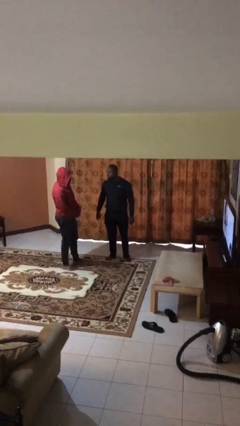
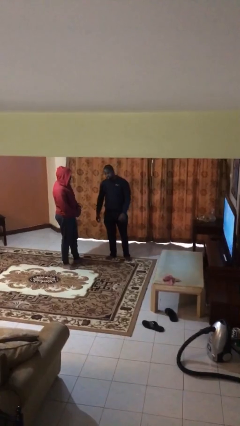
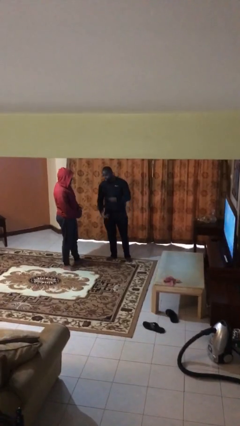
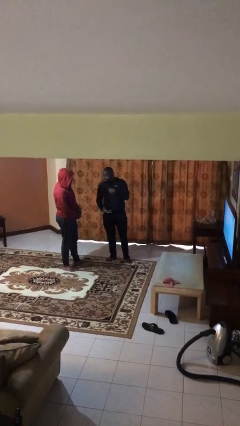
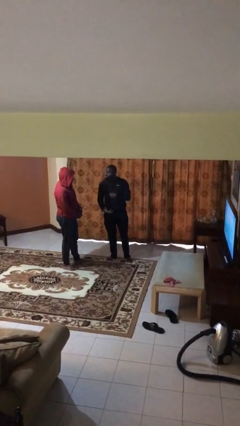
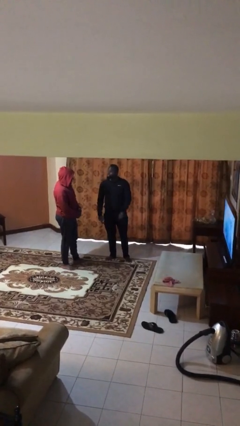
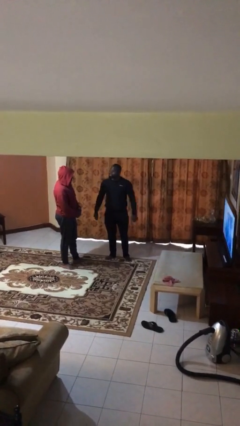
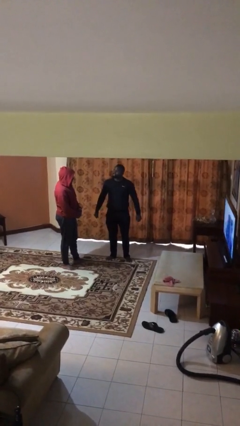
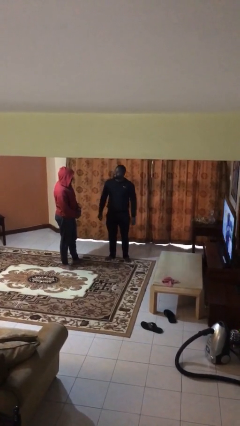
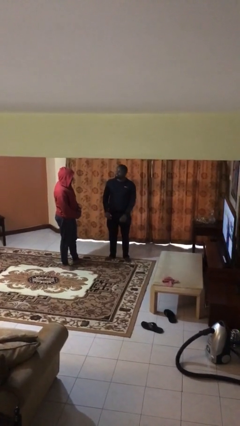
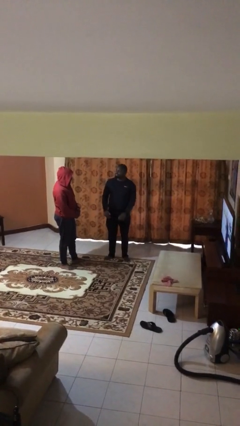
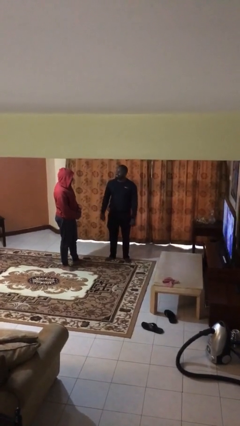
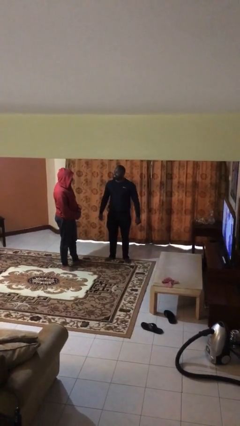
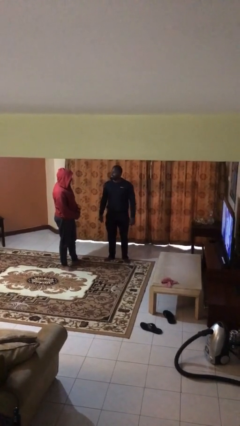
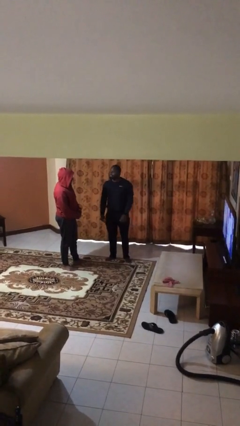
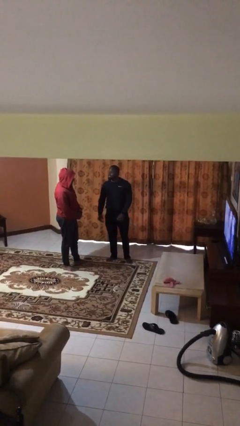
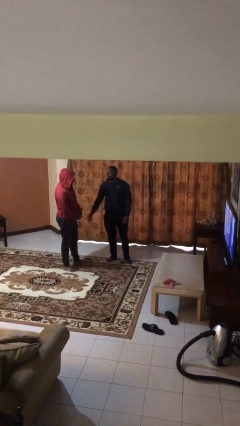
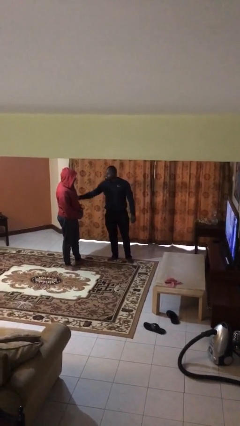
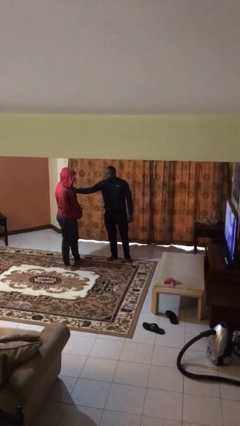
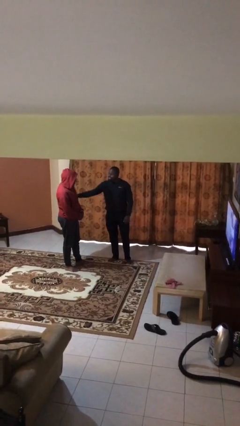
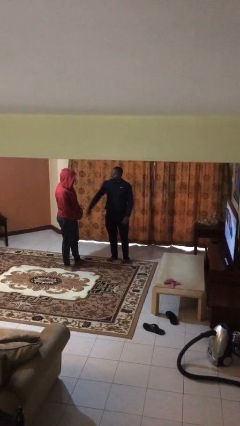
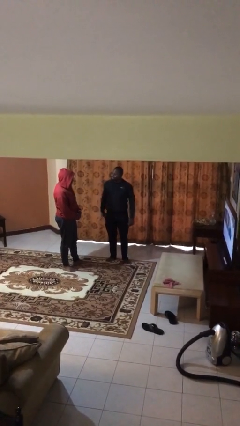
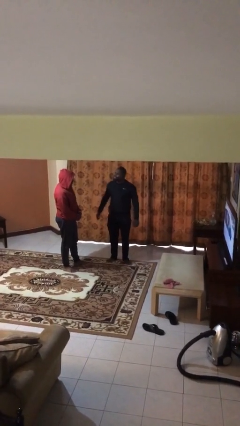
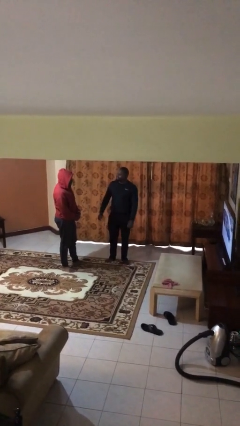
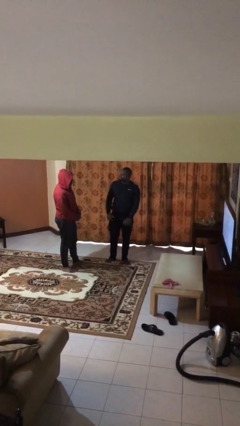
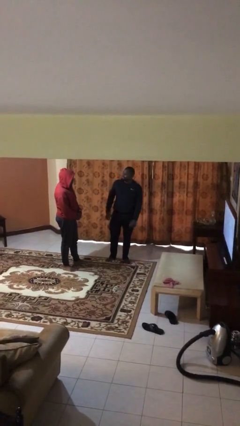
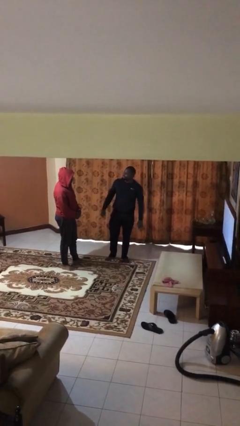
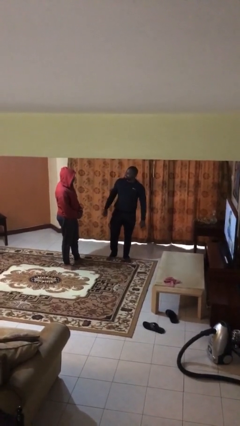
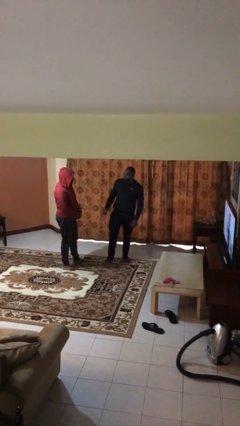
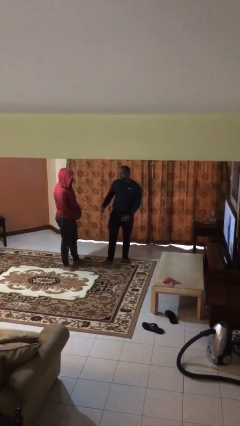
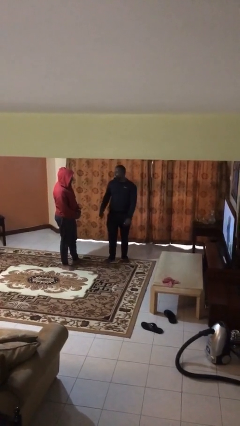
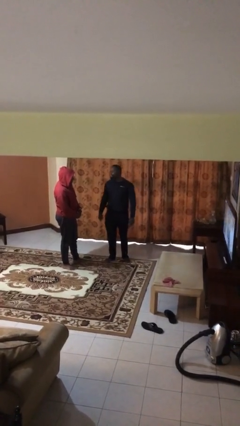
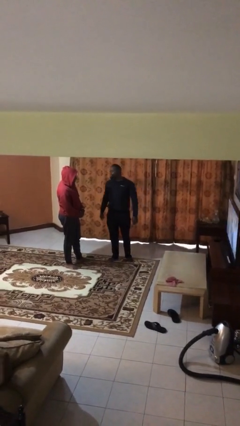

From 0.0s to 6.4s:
person talks to person

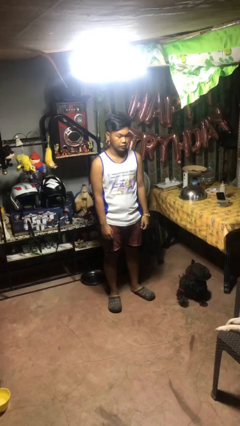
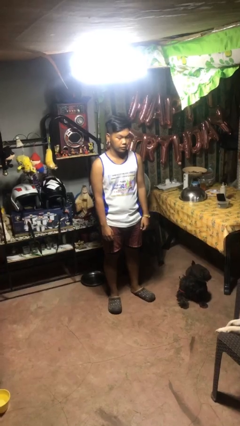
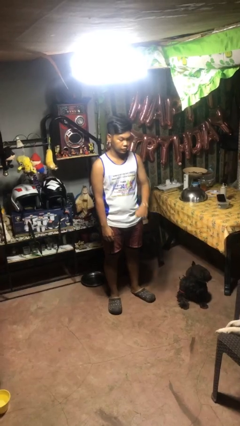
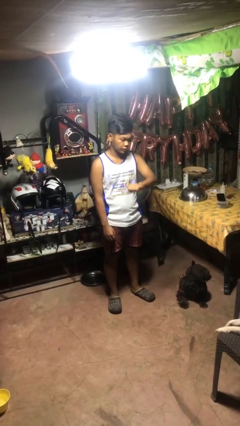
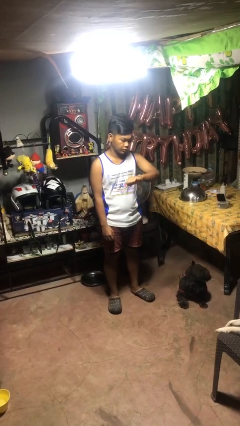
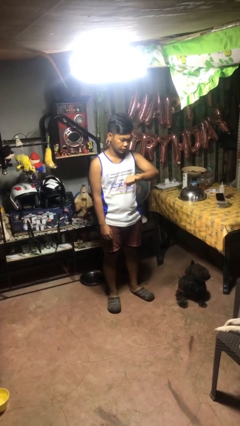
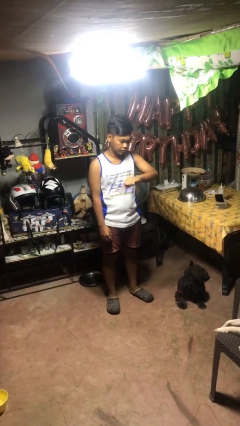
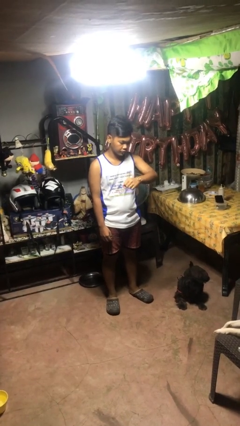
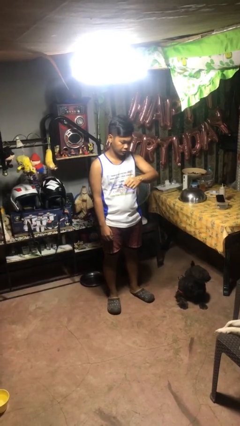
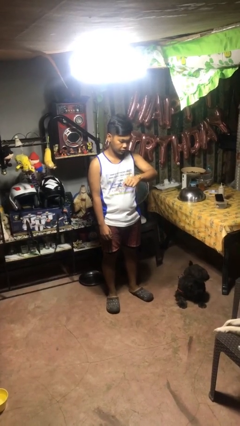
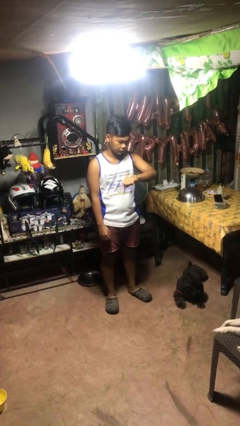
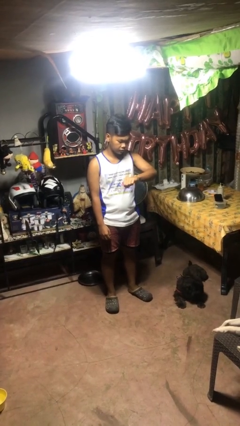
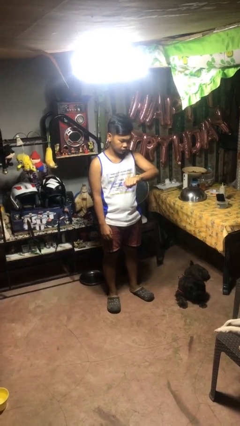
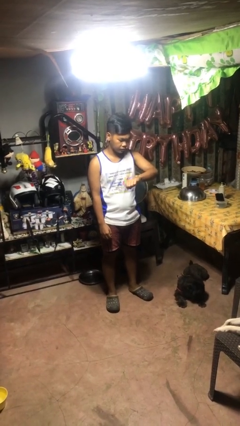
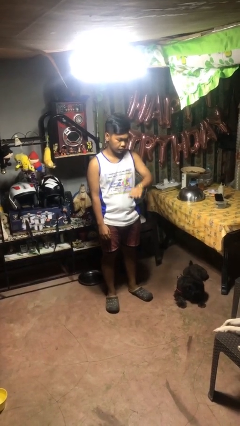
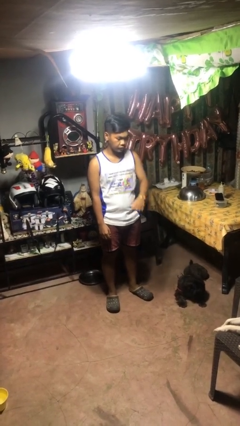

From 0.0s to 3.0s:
person looks at wristwatch

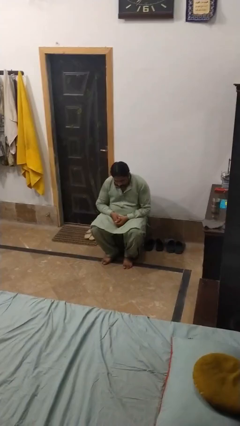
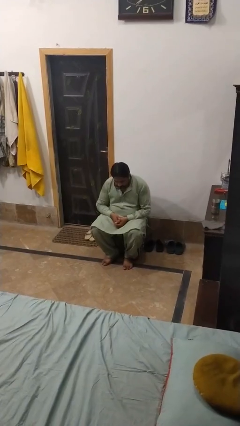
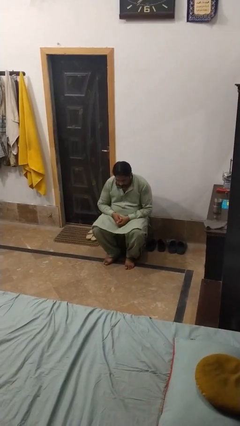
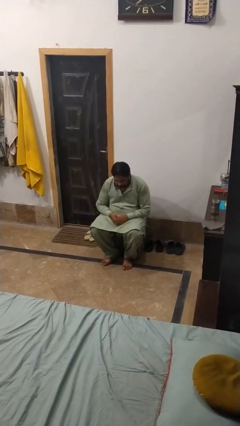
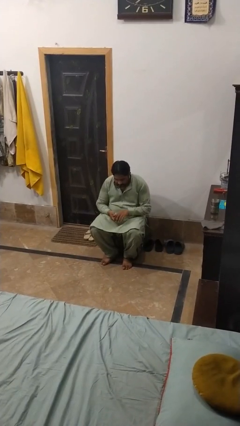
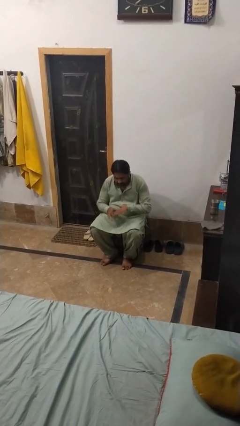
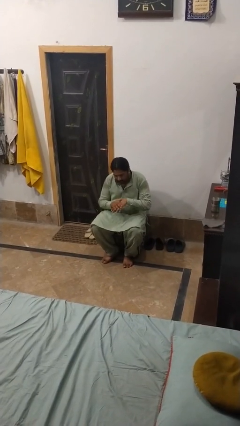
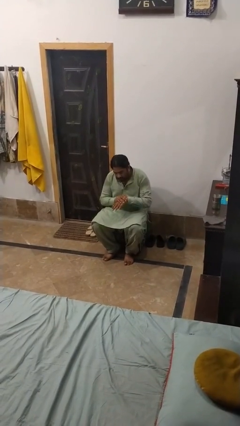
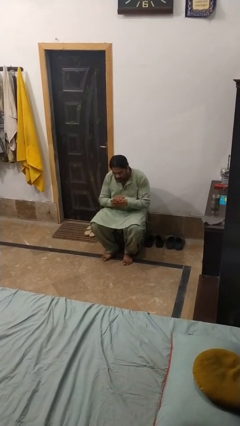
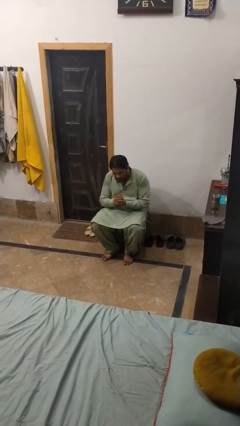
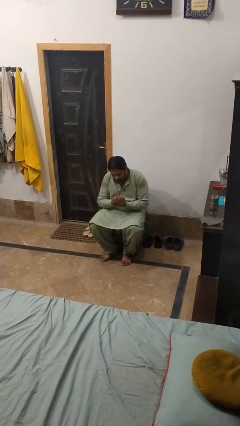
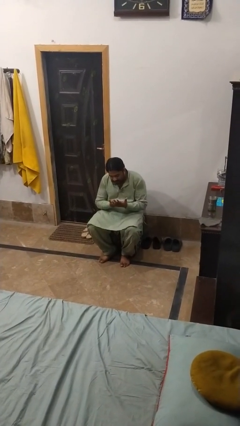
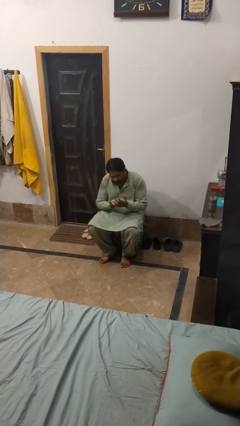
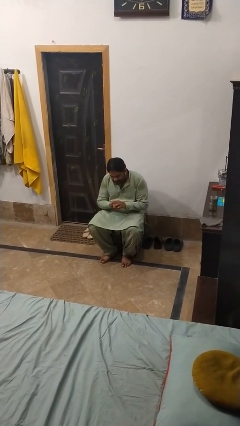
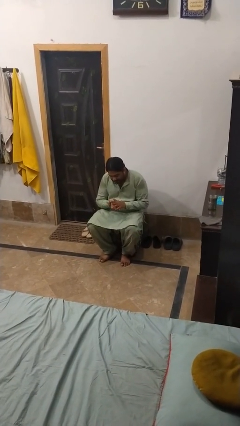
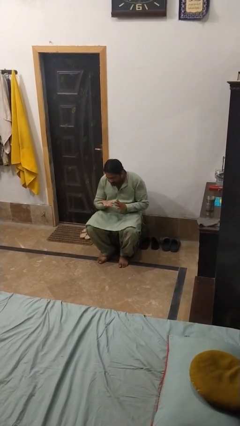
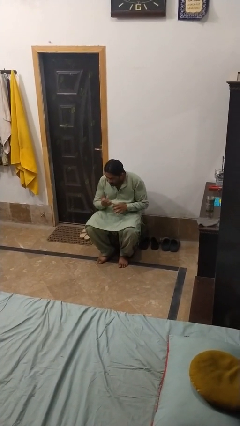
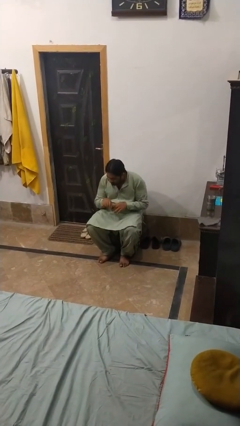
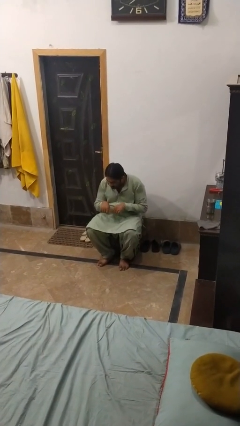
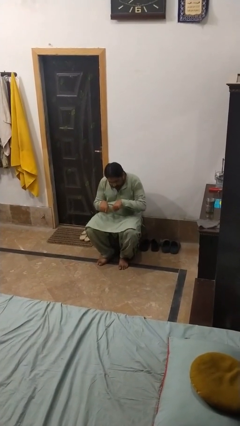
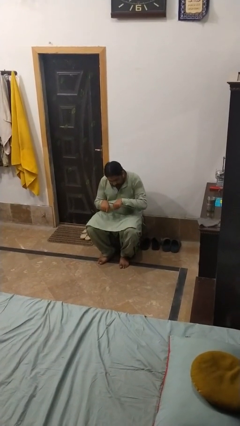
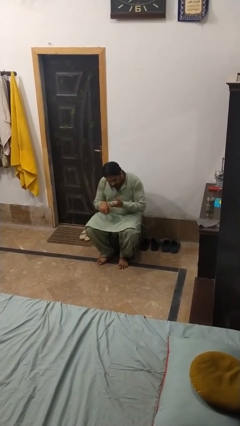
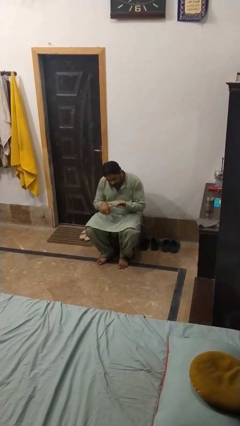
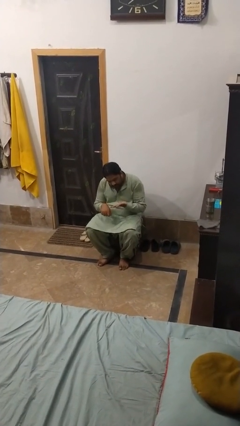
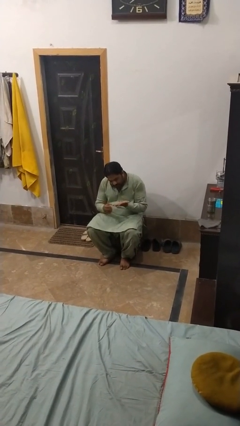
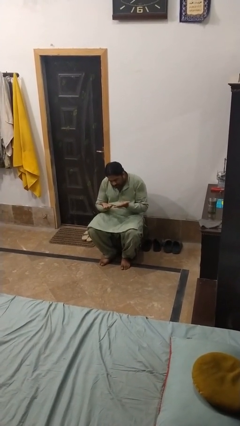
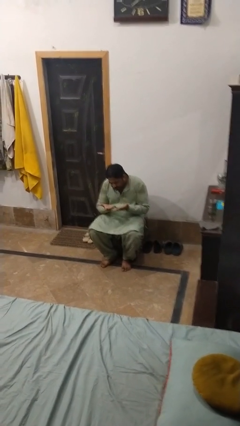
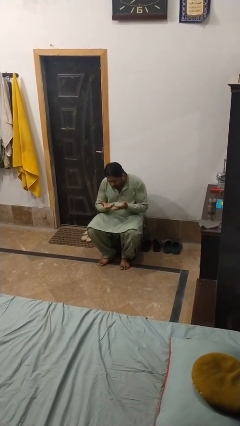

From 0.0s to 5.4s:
person looks at hands in lap

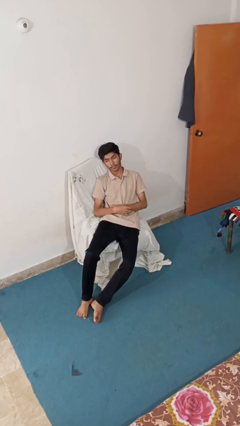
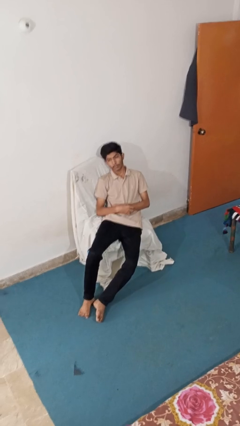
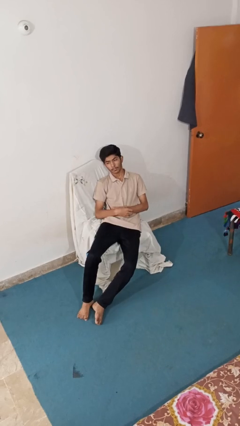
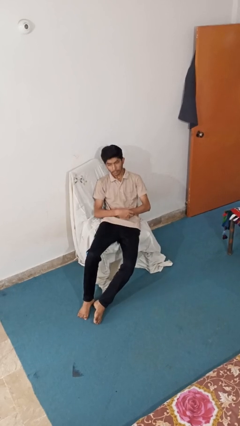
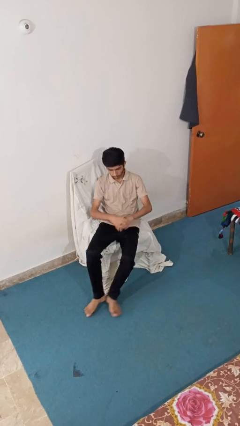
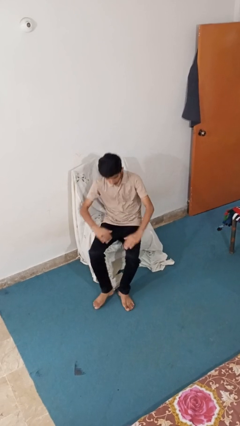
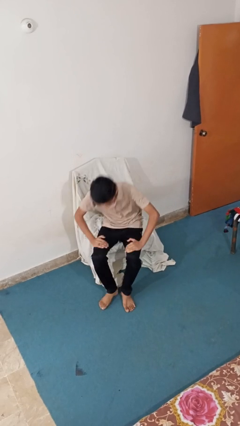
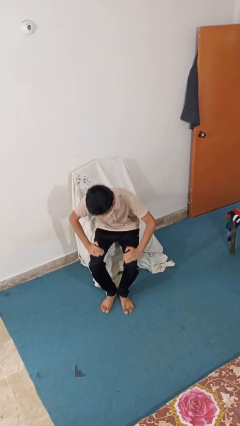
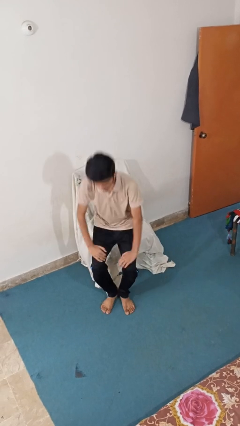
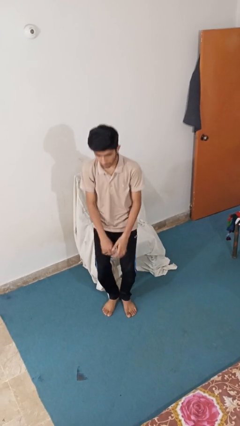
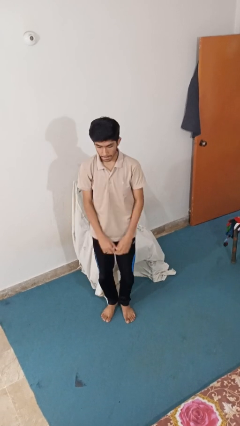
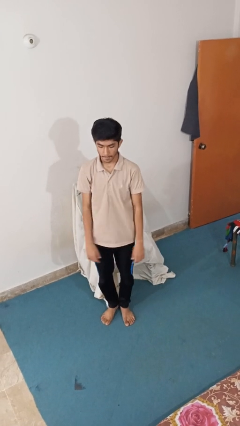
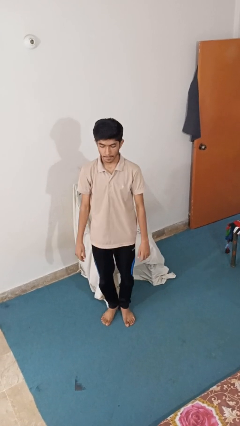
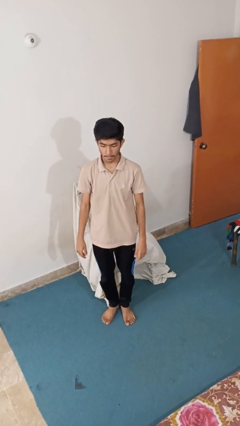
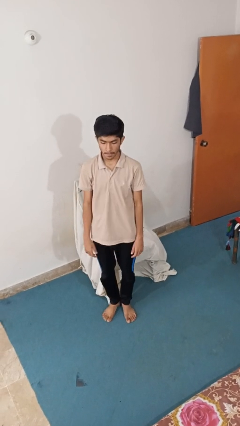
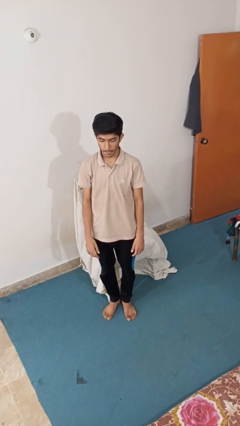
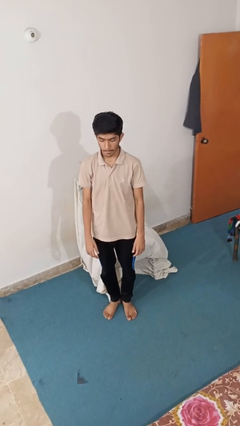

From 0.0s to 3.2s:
person stands up
